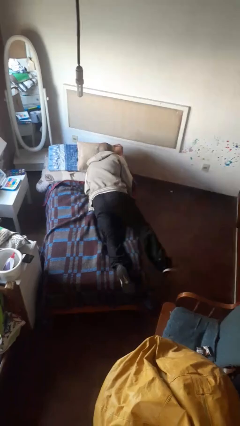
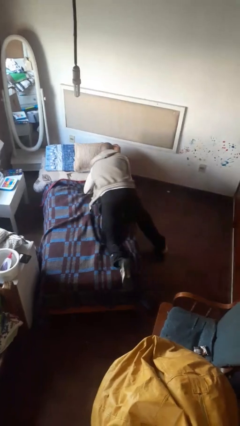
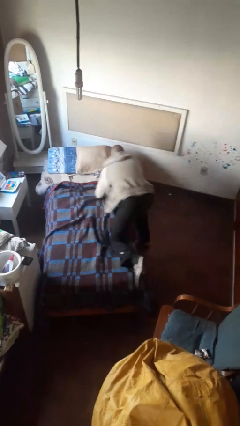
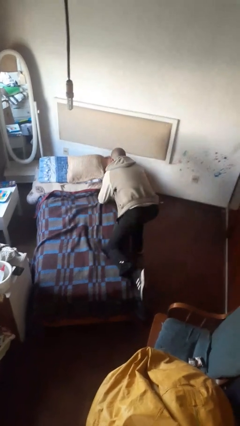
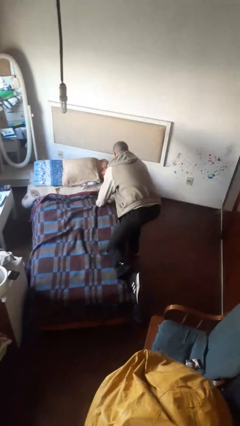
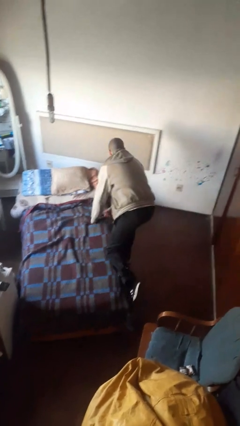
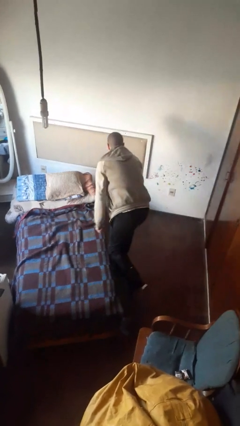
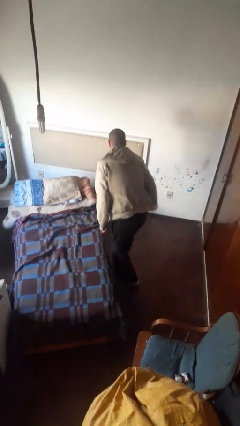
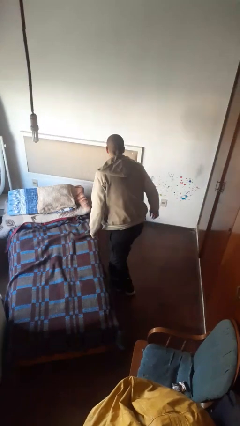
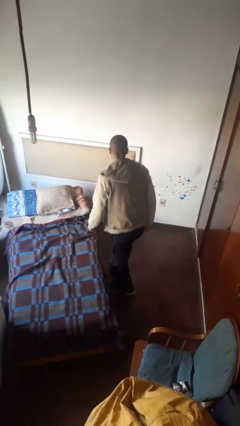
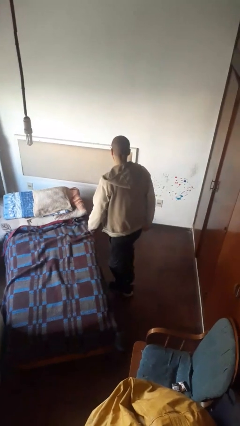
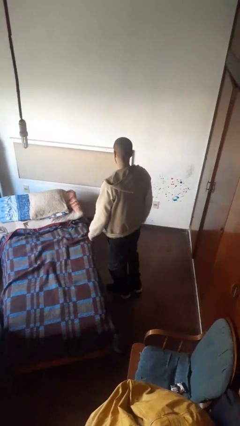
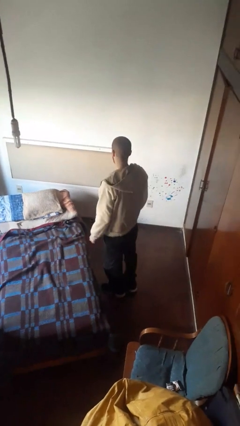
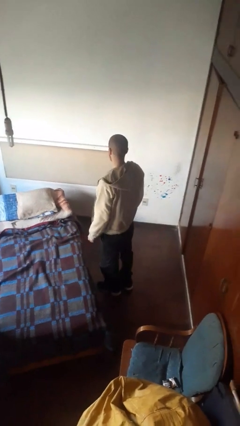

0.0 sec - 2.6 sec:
person stands up

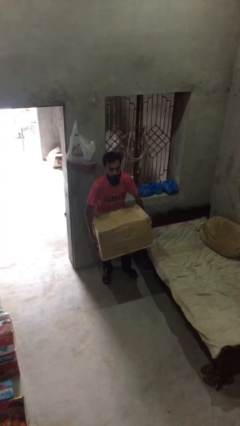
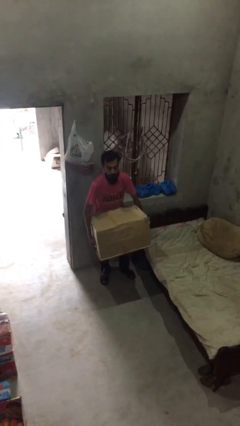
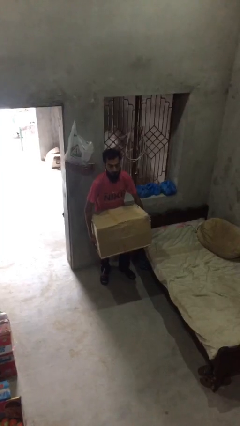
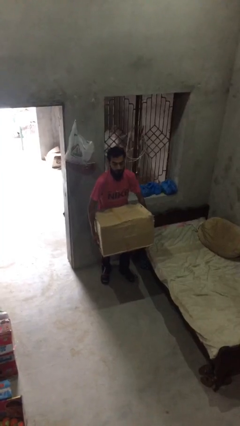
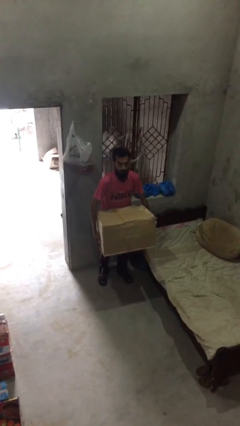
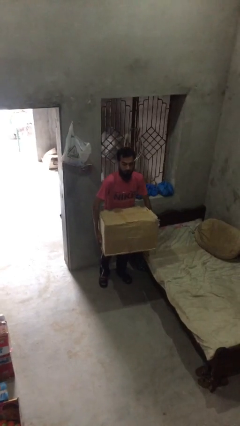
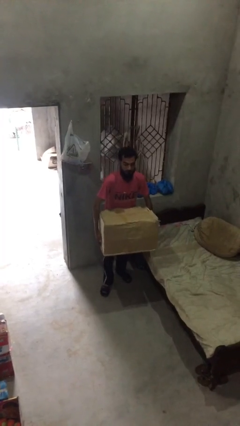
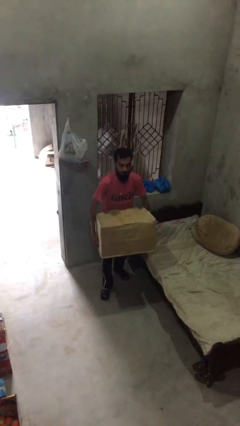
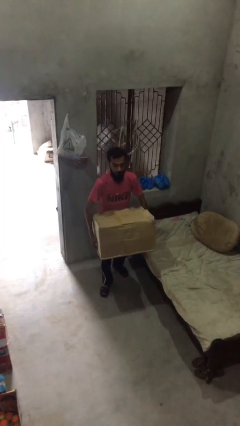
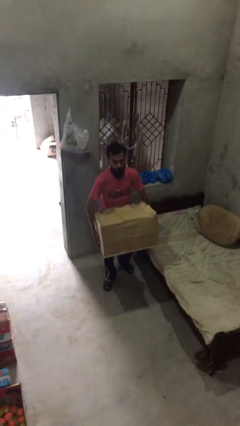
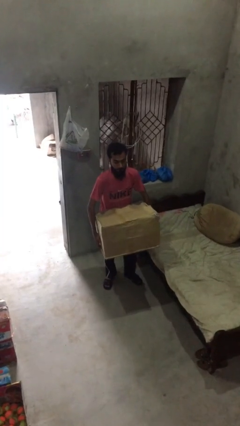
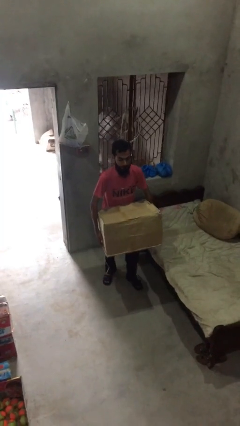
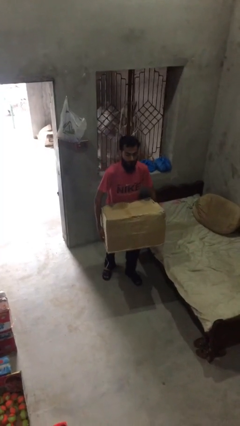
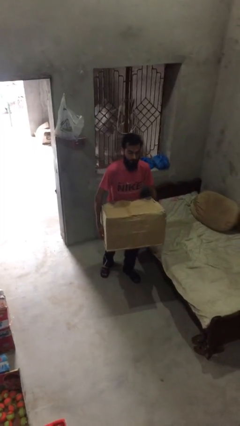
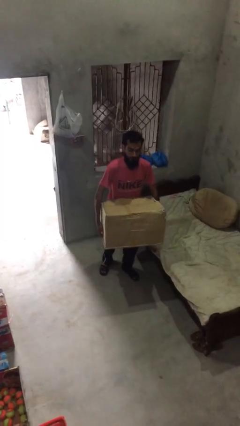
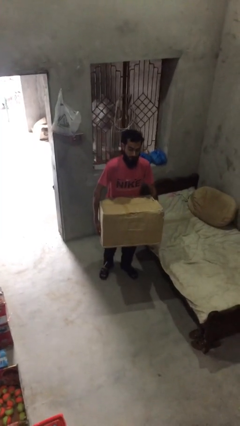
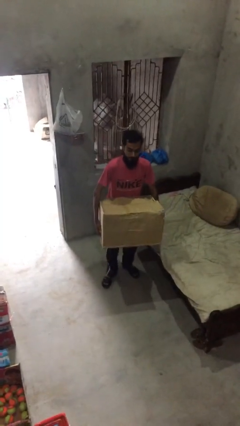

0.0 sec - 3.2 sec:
person carries heavy object

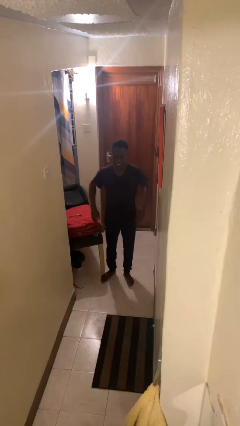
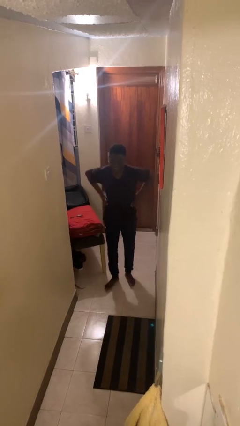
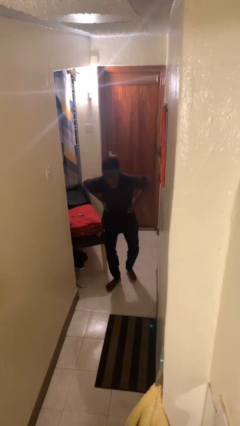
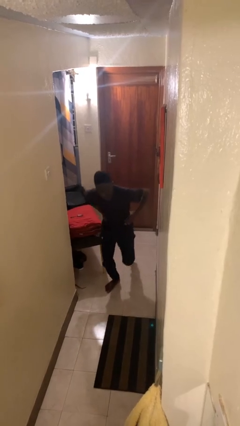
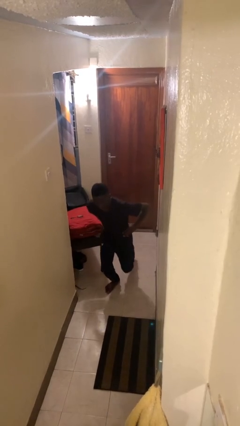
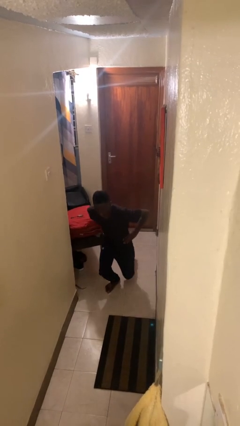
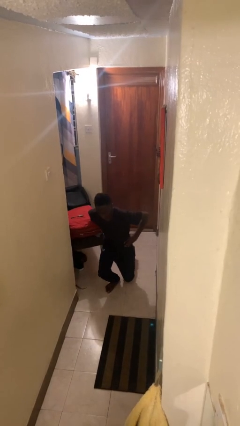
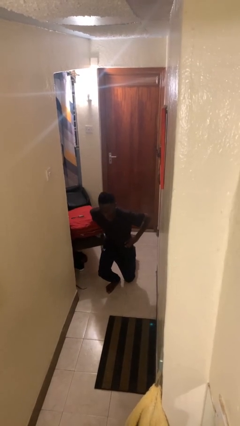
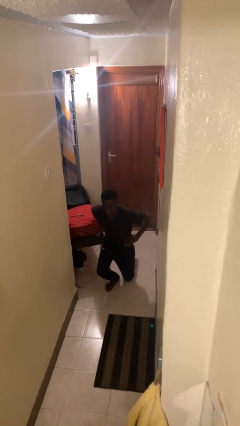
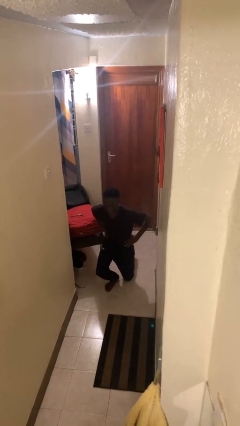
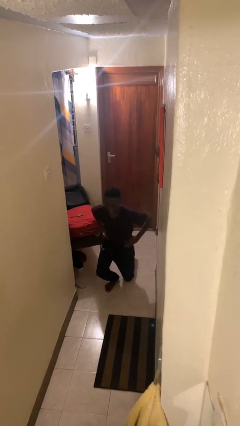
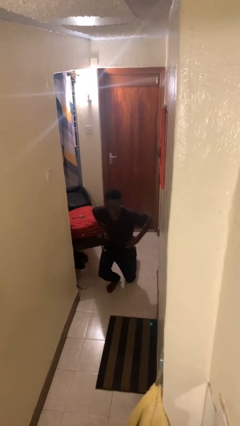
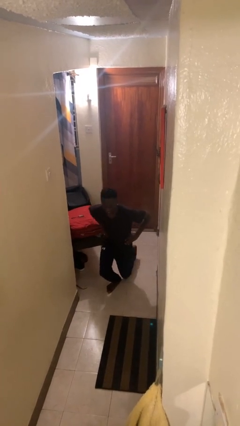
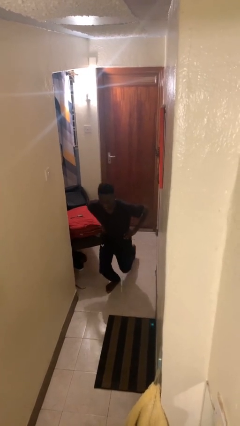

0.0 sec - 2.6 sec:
person exercises with lunges

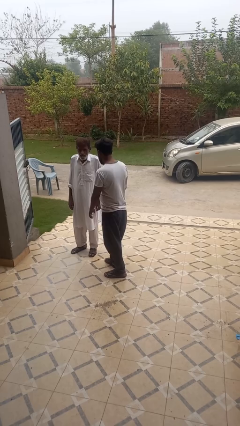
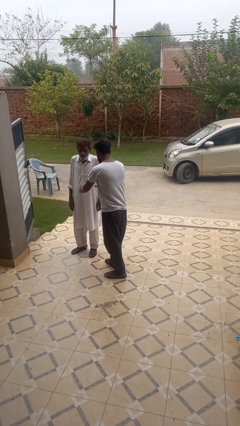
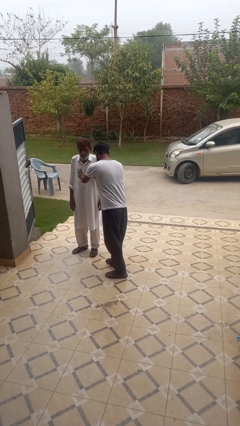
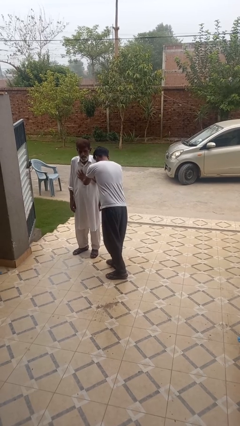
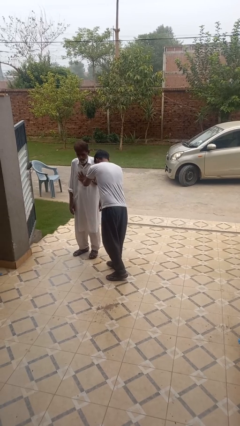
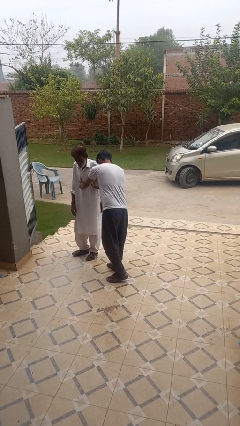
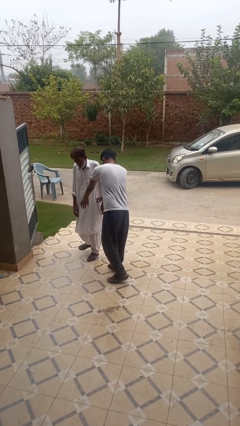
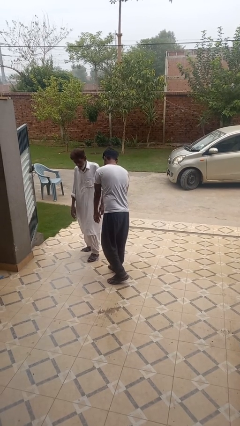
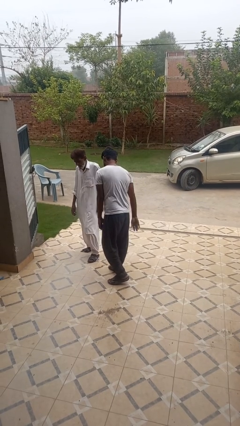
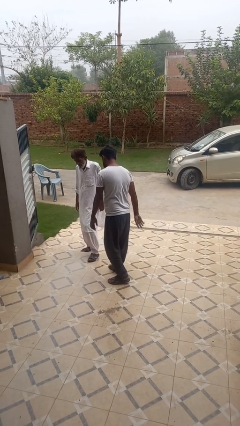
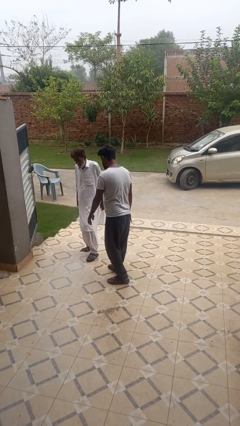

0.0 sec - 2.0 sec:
person shoves person

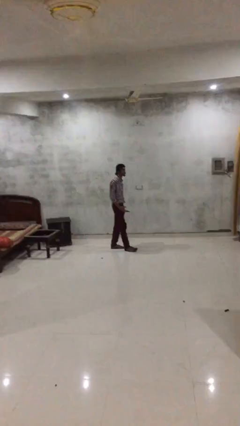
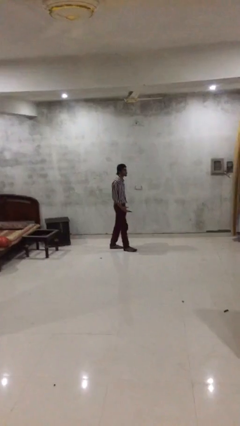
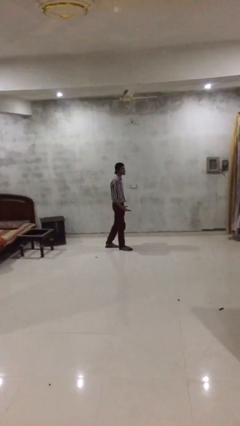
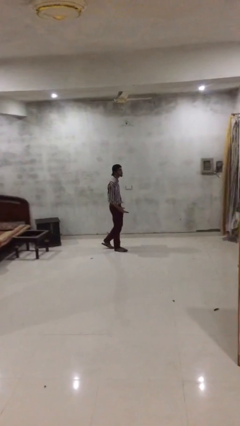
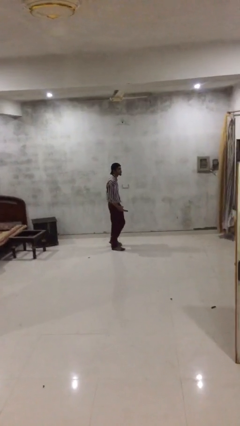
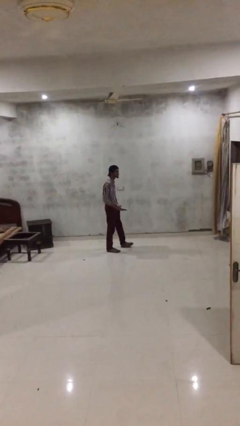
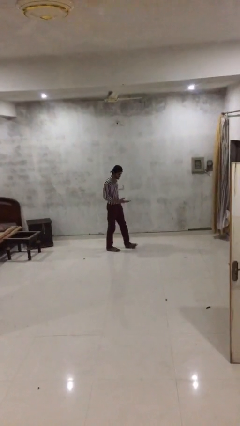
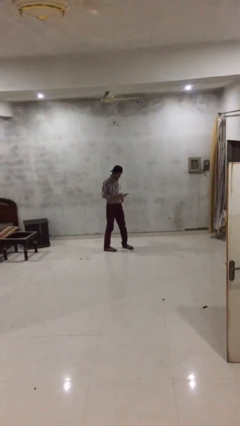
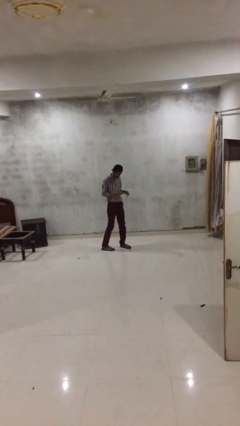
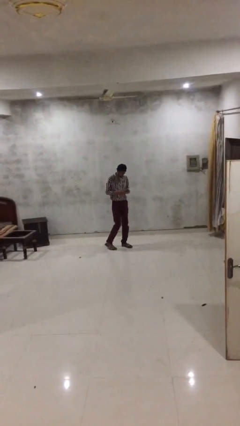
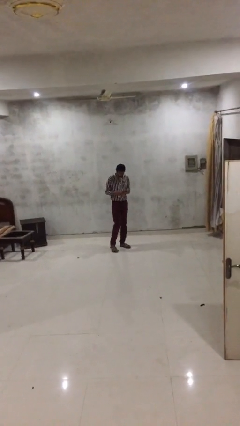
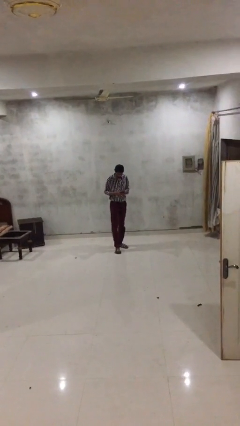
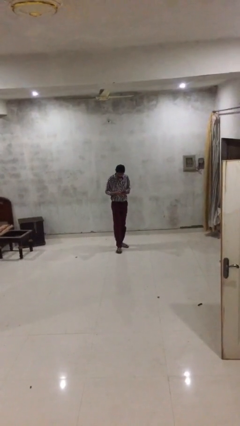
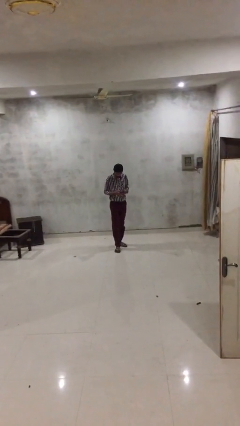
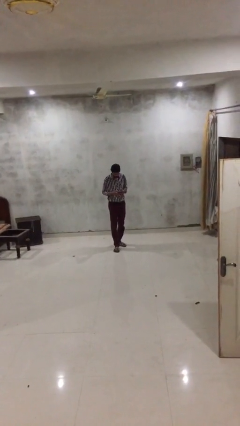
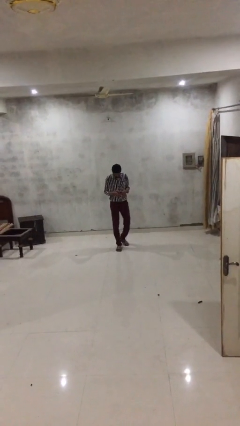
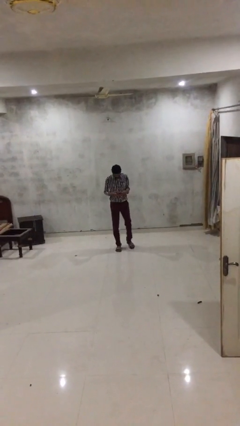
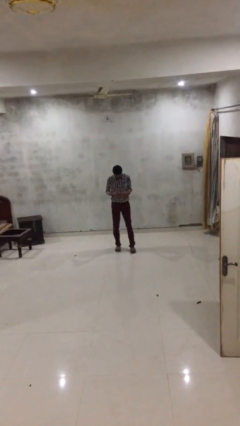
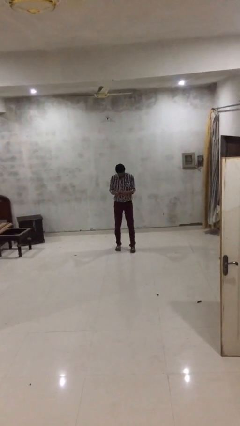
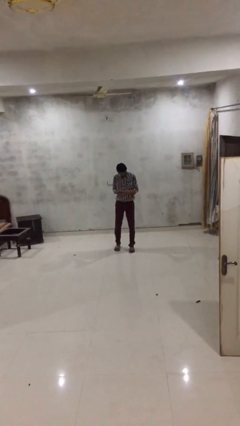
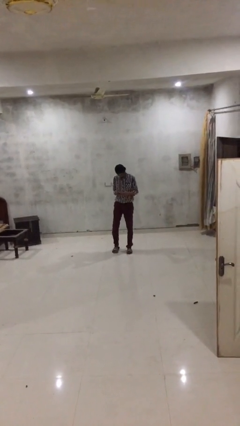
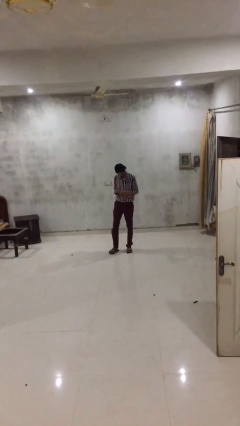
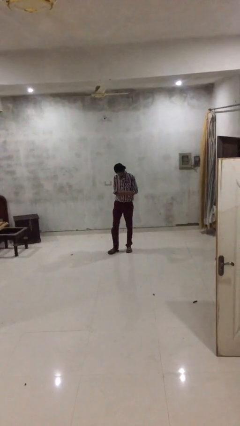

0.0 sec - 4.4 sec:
person texts on phone

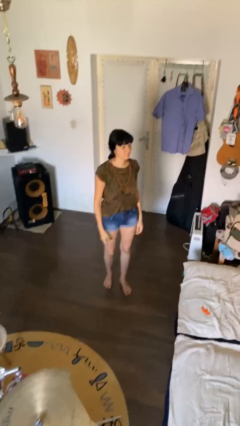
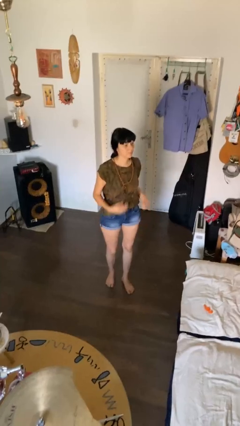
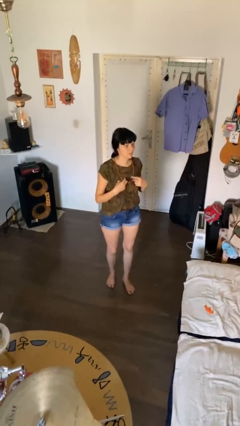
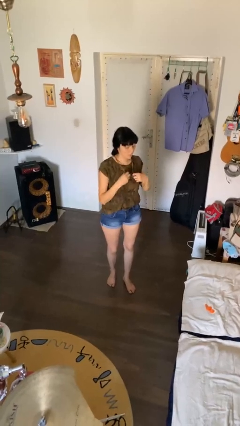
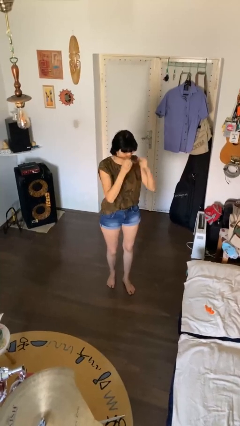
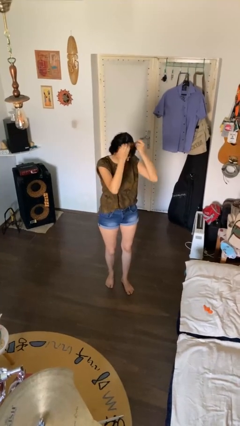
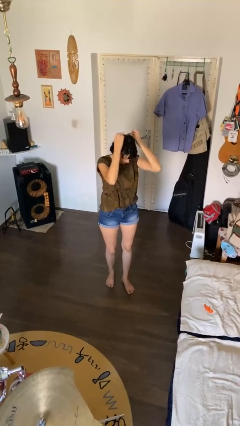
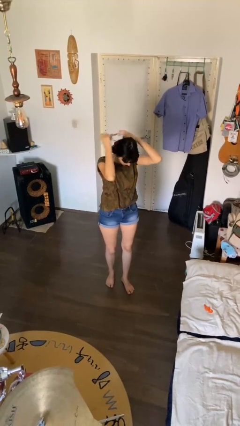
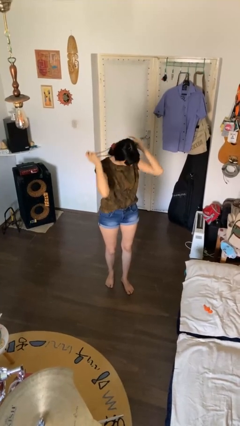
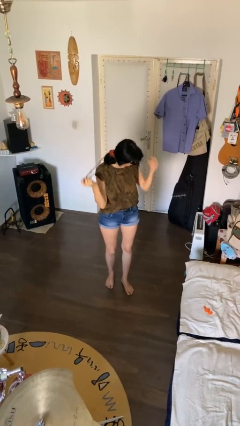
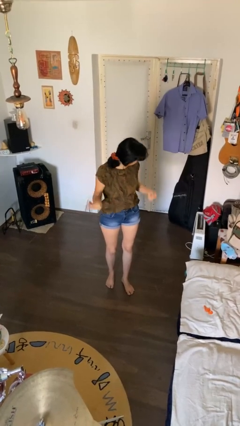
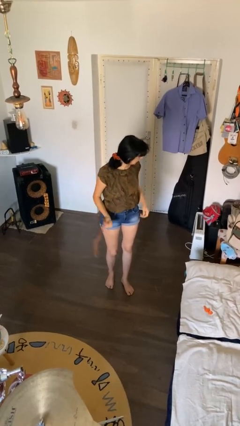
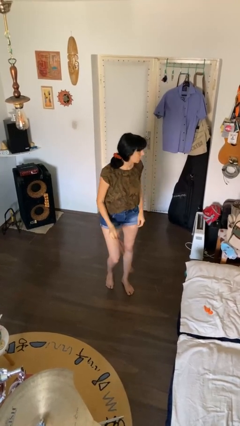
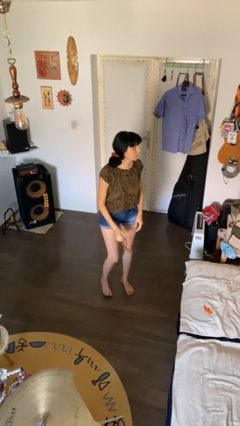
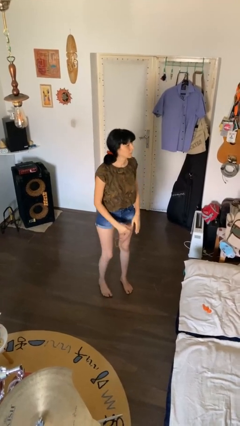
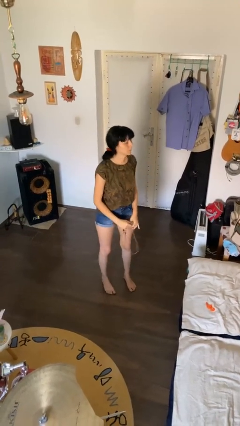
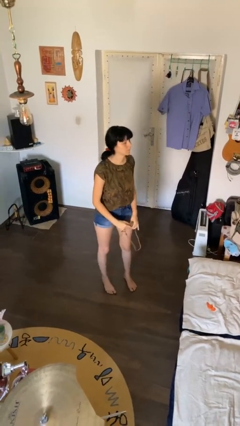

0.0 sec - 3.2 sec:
person takes off necklace
